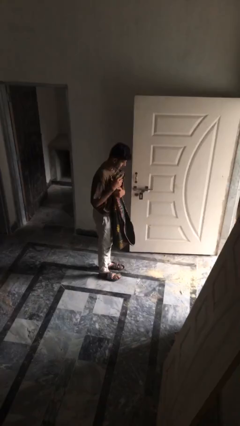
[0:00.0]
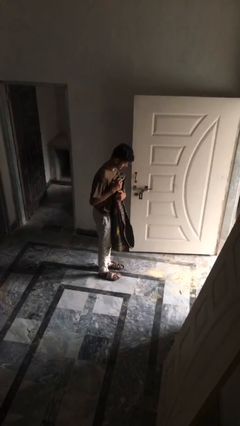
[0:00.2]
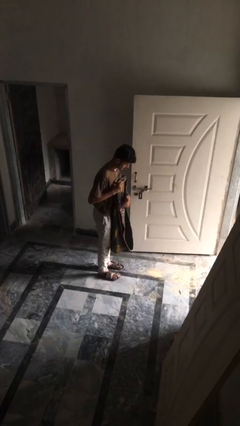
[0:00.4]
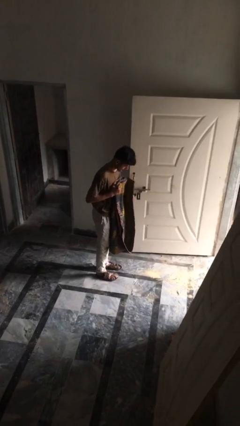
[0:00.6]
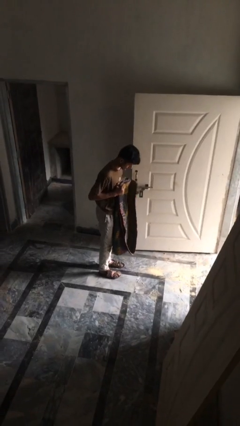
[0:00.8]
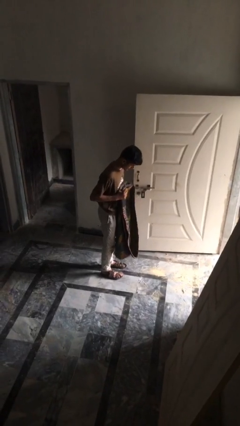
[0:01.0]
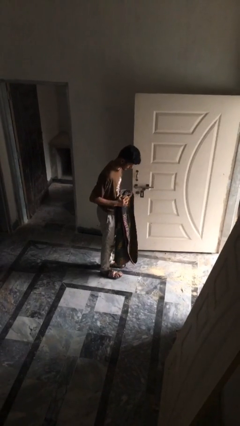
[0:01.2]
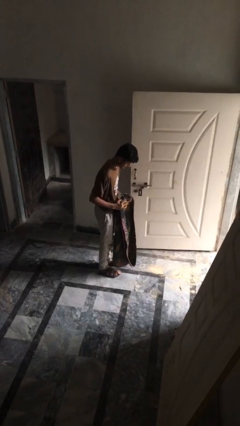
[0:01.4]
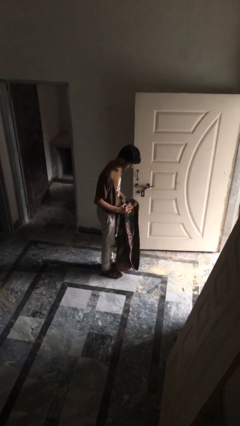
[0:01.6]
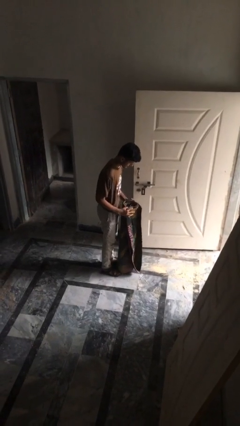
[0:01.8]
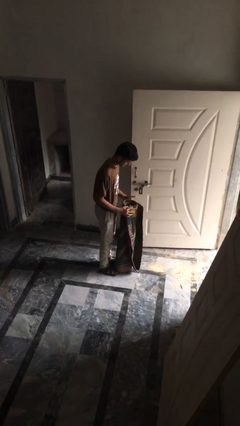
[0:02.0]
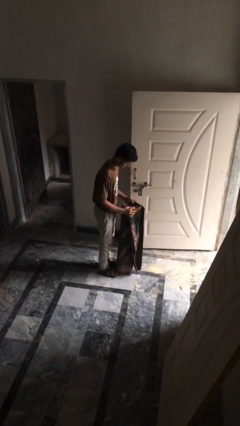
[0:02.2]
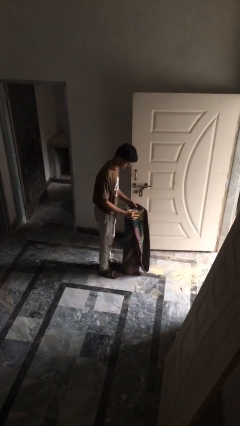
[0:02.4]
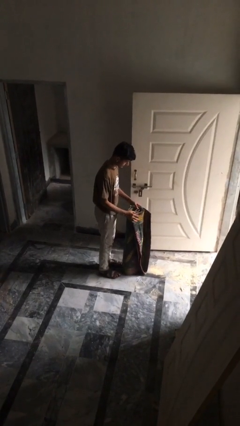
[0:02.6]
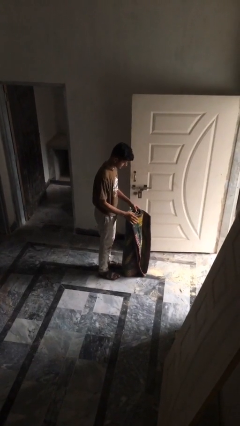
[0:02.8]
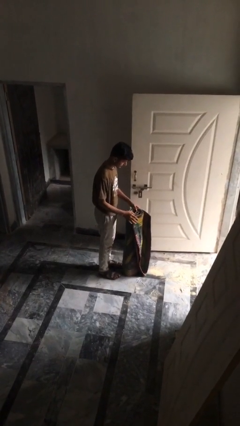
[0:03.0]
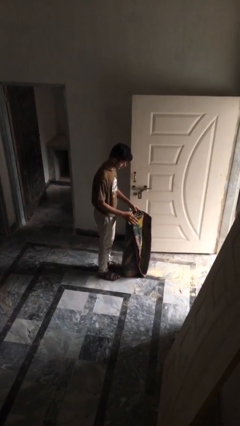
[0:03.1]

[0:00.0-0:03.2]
person puts down object on floor

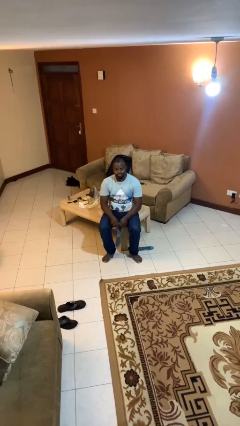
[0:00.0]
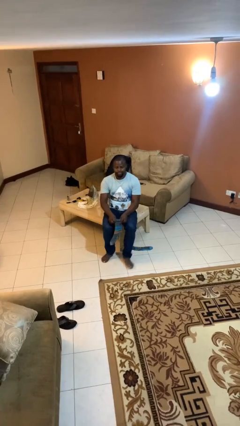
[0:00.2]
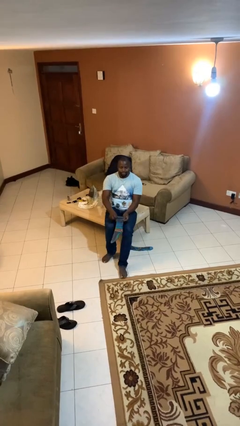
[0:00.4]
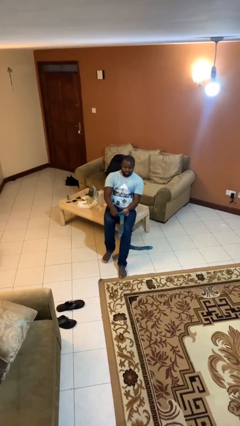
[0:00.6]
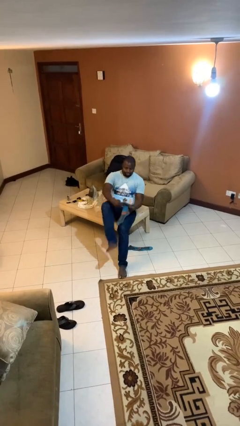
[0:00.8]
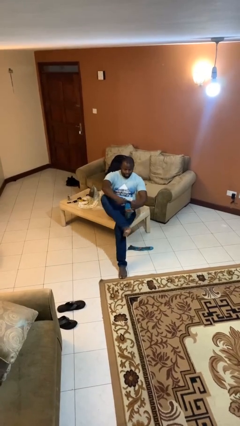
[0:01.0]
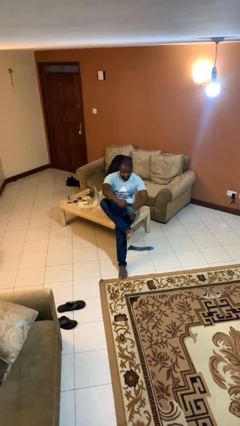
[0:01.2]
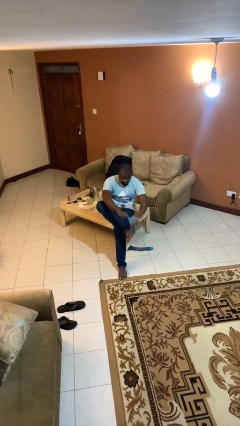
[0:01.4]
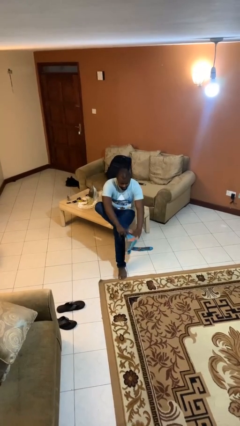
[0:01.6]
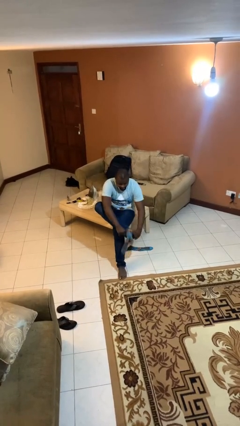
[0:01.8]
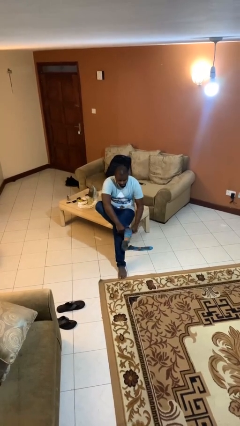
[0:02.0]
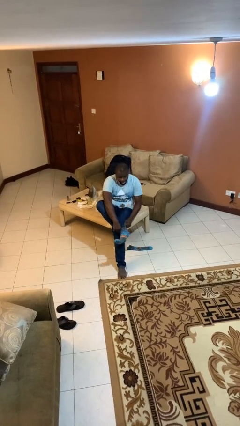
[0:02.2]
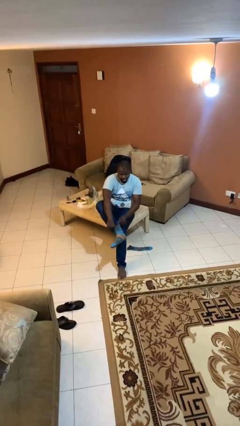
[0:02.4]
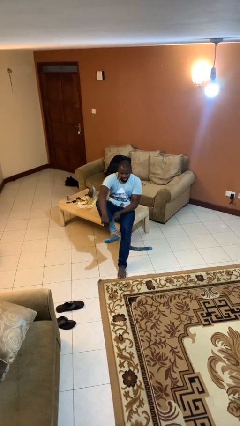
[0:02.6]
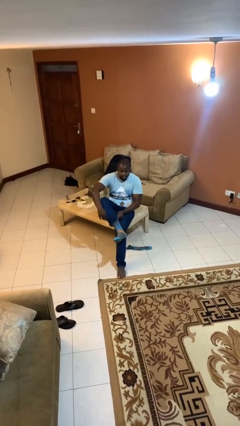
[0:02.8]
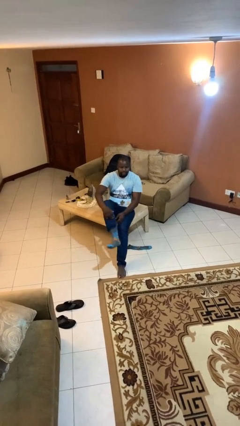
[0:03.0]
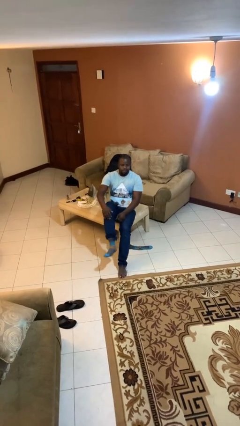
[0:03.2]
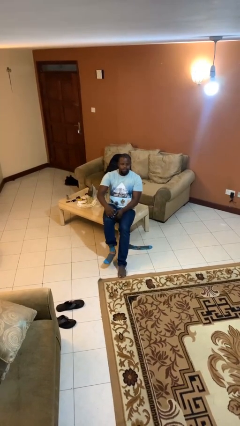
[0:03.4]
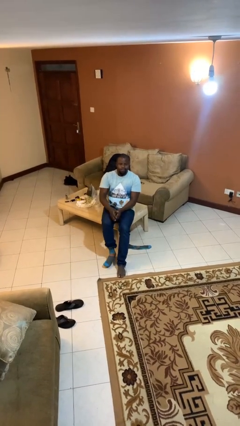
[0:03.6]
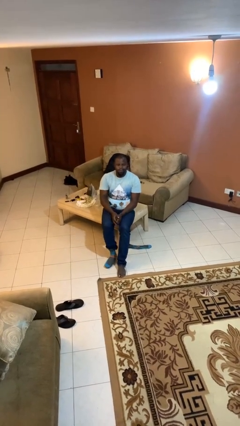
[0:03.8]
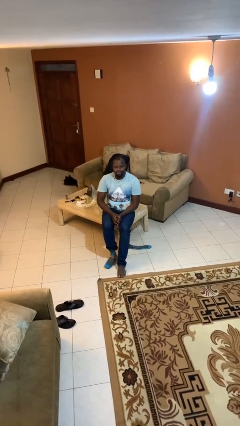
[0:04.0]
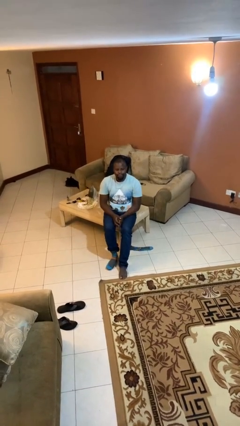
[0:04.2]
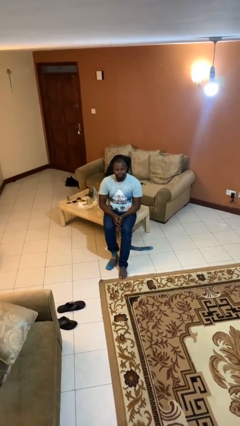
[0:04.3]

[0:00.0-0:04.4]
person puts on socks

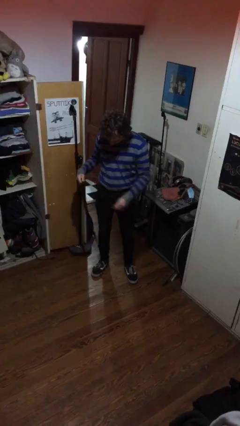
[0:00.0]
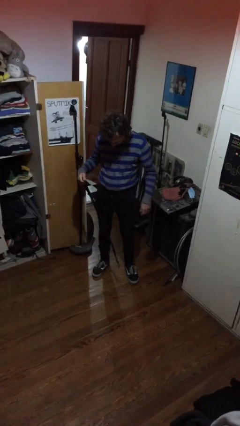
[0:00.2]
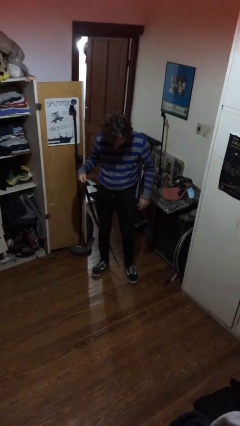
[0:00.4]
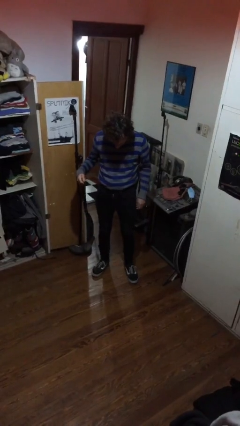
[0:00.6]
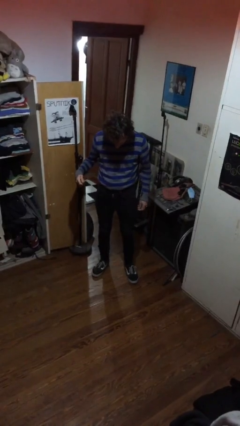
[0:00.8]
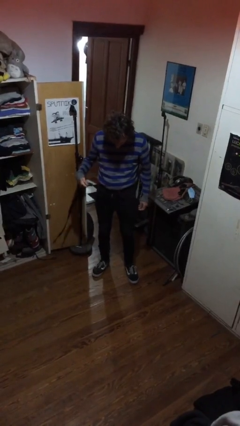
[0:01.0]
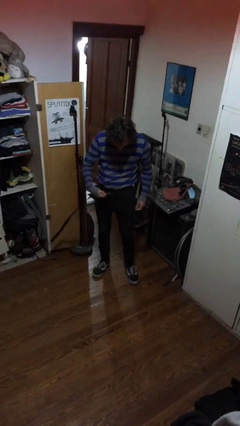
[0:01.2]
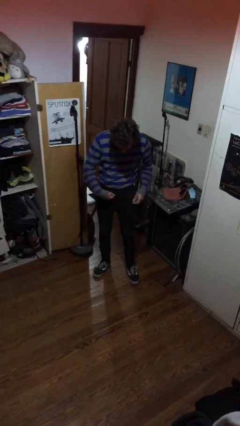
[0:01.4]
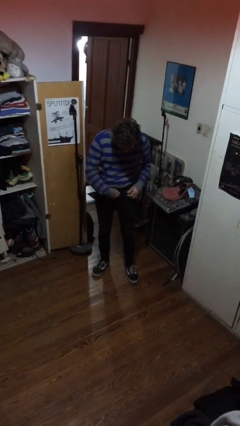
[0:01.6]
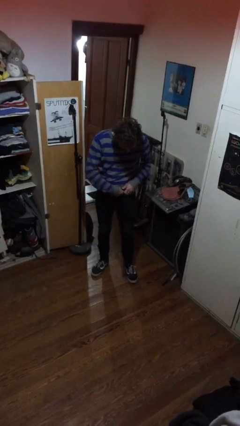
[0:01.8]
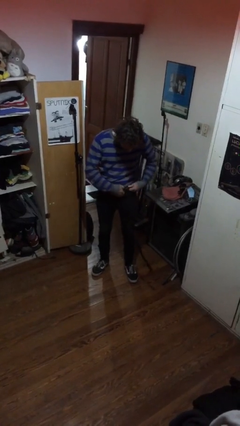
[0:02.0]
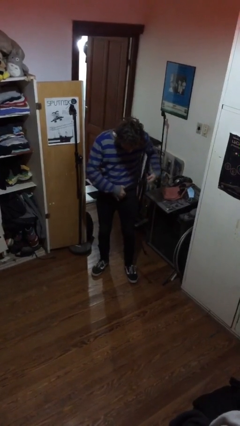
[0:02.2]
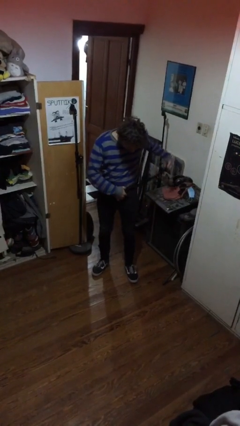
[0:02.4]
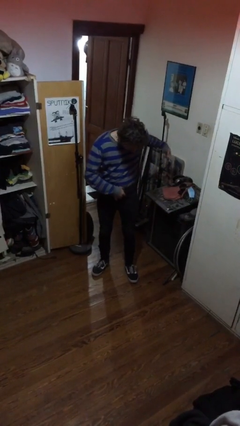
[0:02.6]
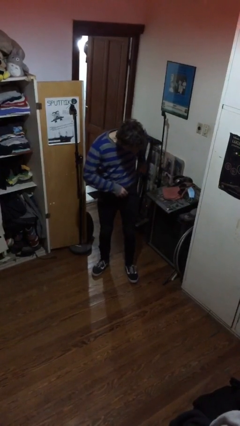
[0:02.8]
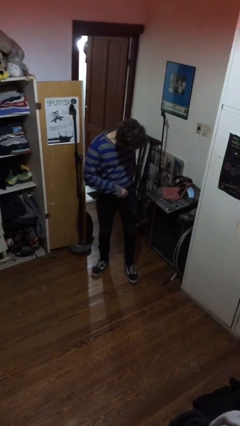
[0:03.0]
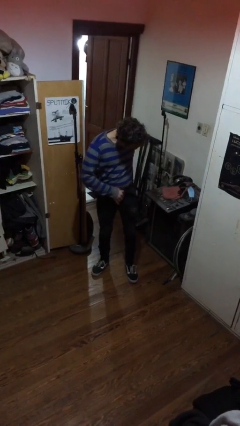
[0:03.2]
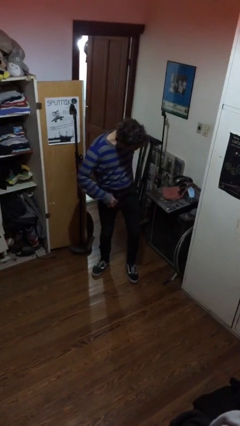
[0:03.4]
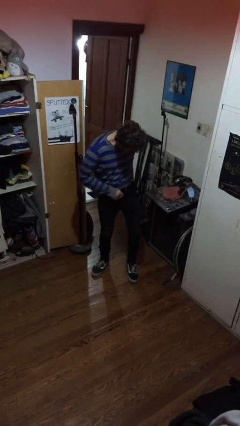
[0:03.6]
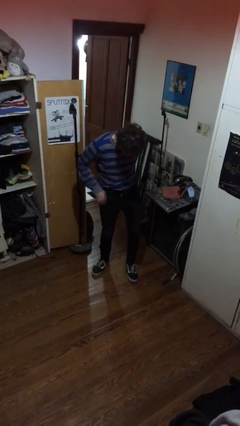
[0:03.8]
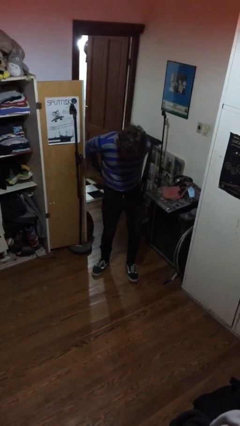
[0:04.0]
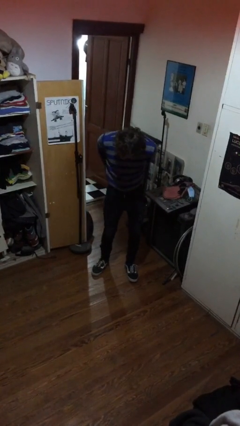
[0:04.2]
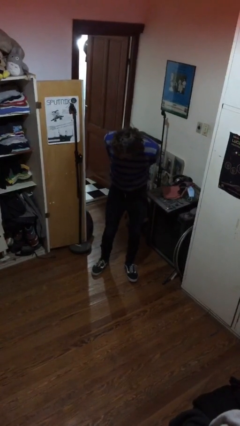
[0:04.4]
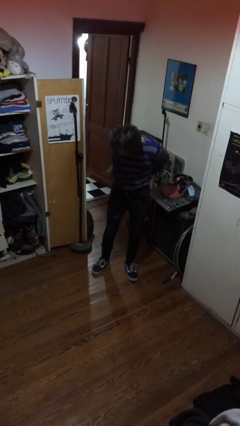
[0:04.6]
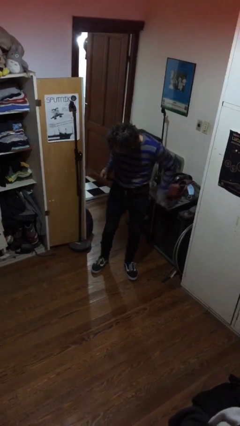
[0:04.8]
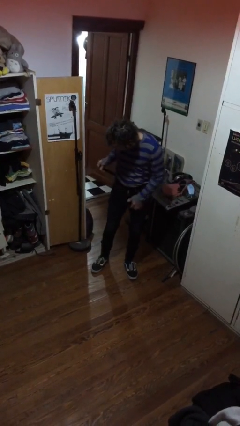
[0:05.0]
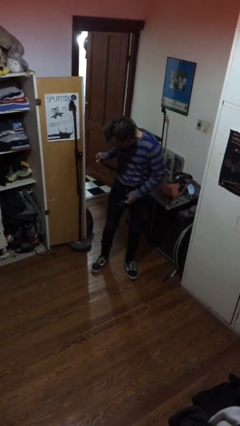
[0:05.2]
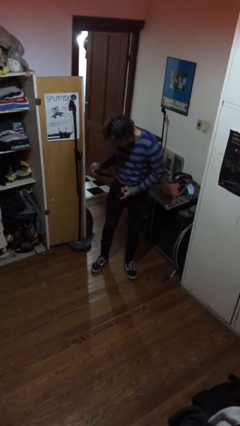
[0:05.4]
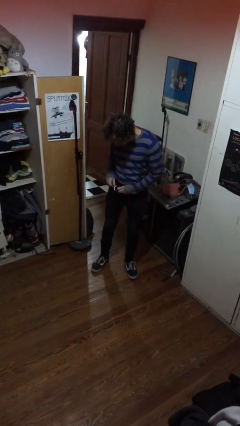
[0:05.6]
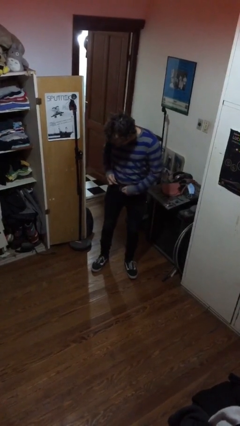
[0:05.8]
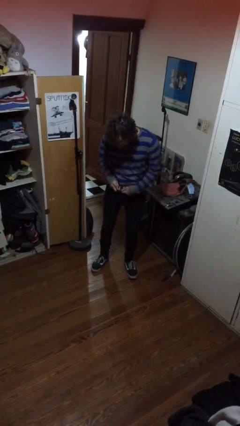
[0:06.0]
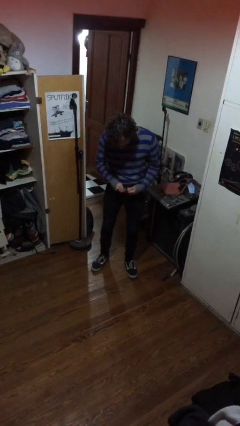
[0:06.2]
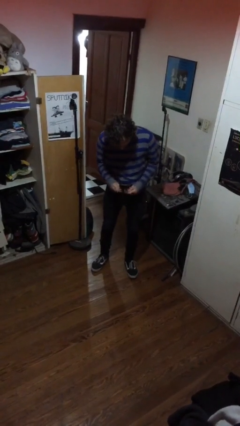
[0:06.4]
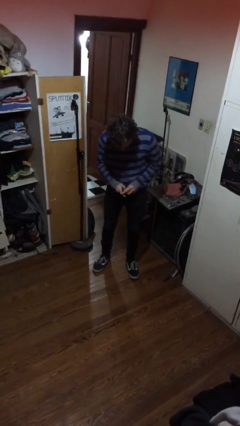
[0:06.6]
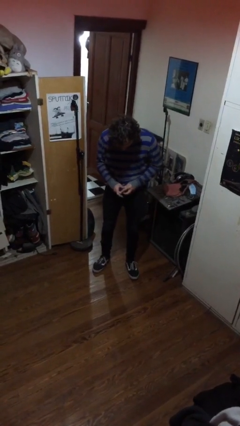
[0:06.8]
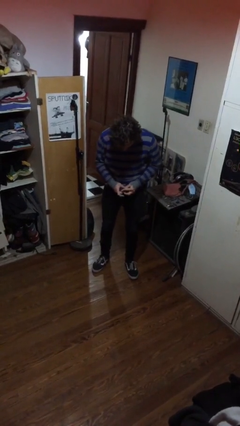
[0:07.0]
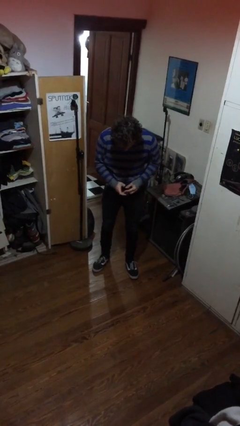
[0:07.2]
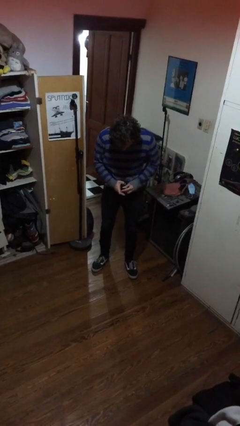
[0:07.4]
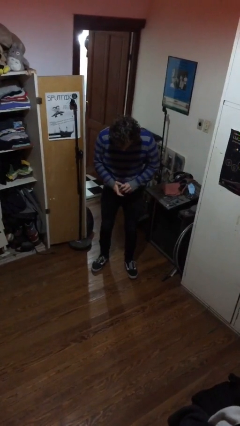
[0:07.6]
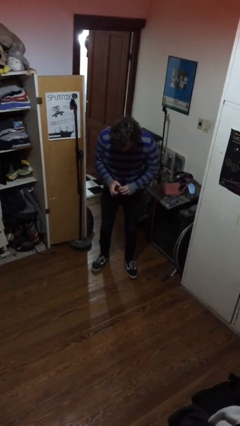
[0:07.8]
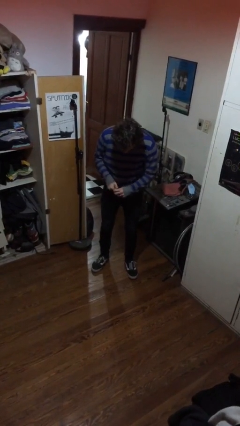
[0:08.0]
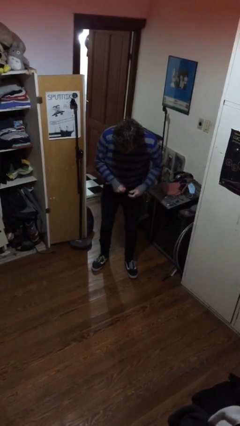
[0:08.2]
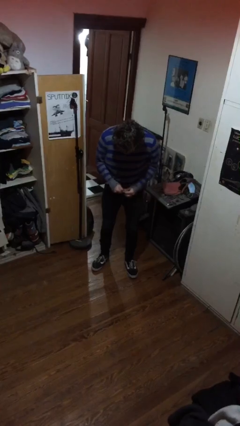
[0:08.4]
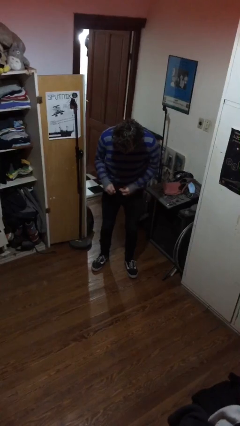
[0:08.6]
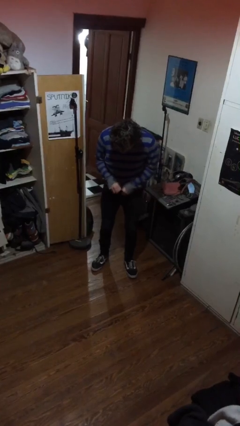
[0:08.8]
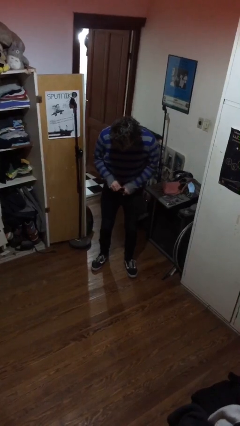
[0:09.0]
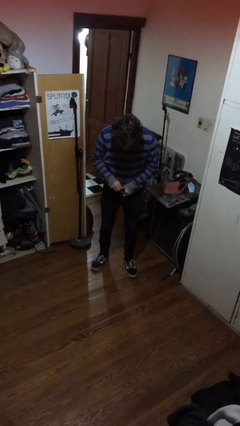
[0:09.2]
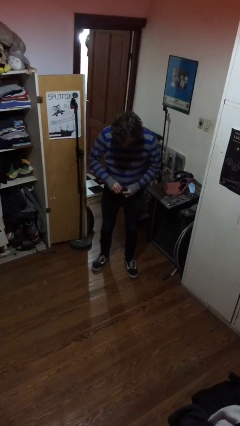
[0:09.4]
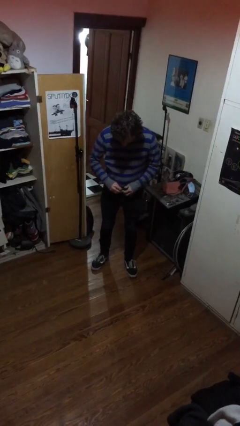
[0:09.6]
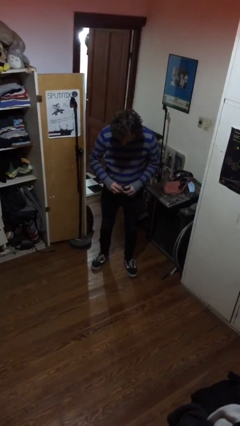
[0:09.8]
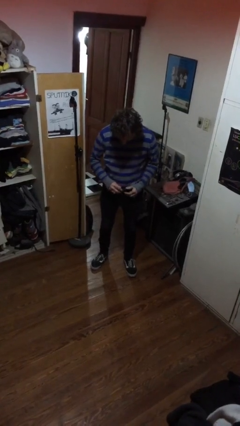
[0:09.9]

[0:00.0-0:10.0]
person puts on belt

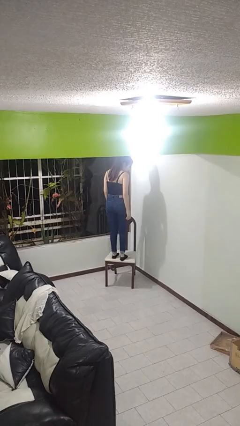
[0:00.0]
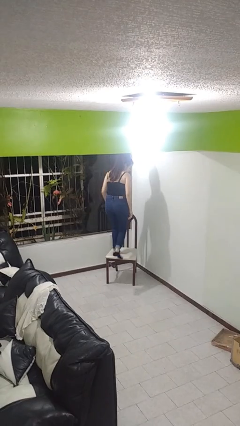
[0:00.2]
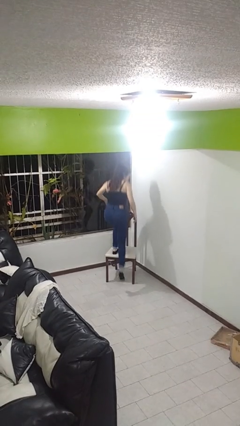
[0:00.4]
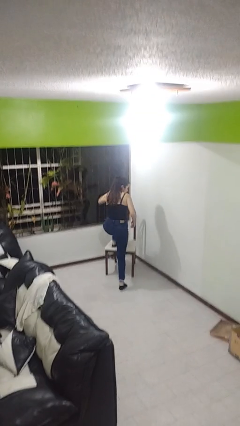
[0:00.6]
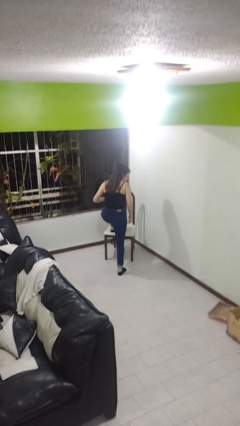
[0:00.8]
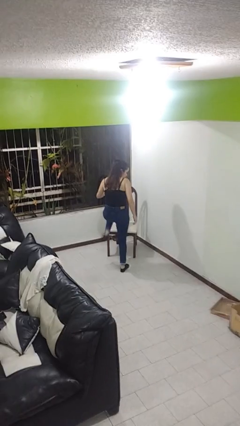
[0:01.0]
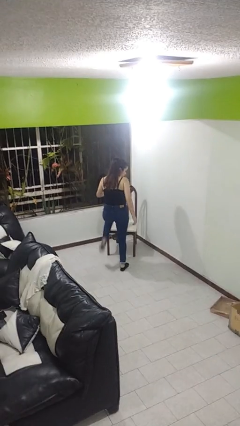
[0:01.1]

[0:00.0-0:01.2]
person climbs off chair
